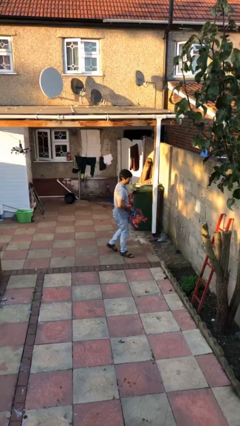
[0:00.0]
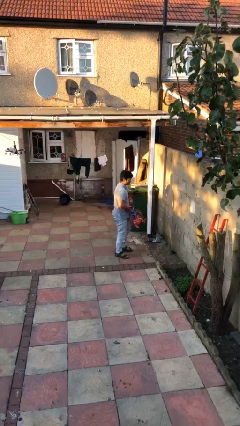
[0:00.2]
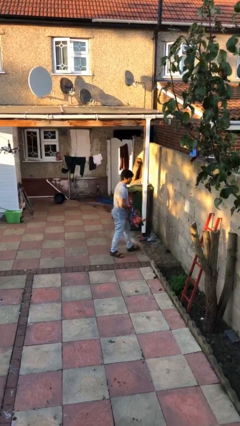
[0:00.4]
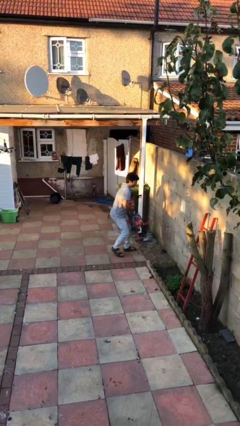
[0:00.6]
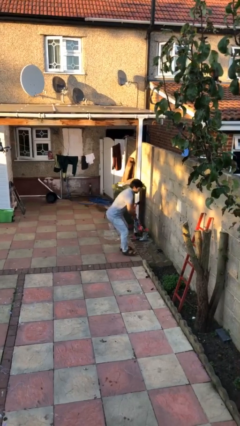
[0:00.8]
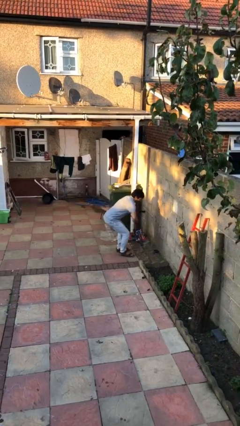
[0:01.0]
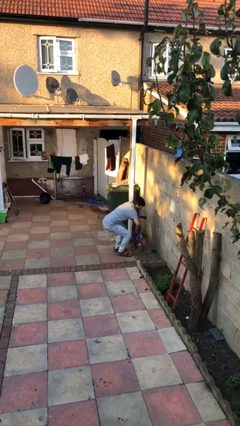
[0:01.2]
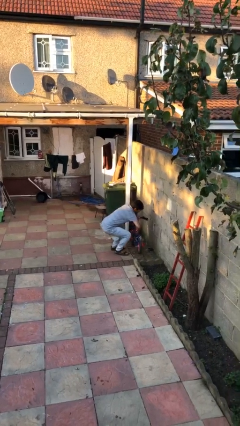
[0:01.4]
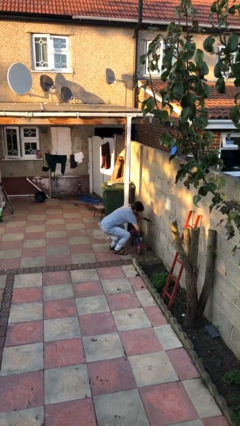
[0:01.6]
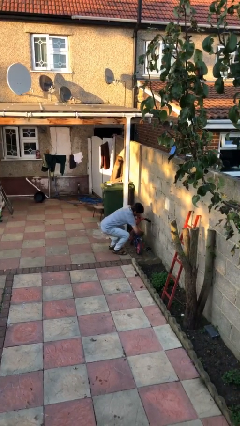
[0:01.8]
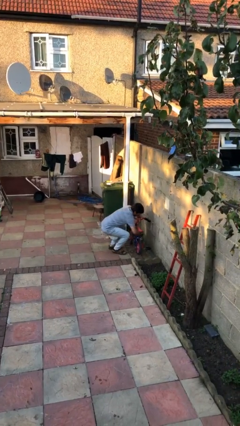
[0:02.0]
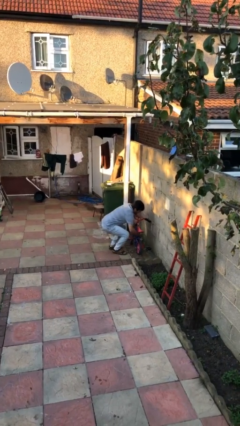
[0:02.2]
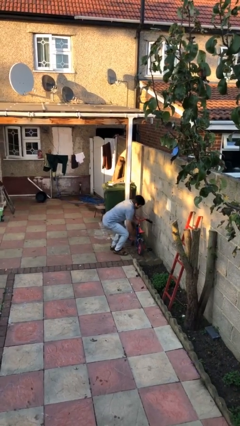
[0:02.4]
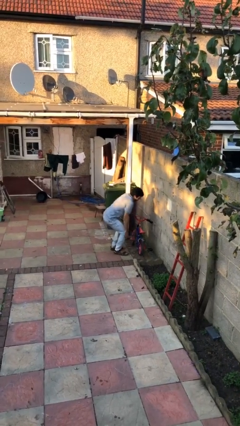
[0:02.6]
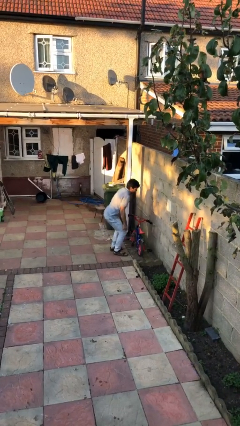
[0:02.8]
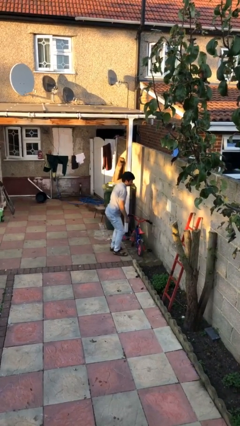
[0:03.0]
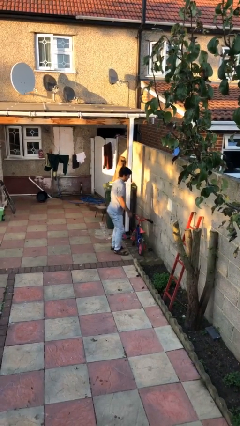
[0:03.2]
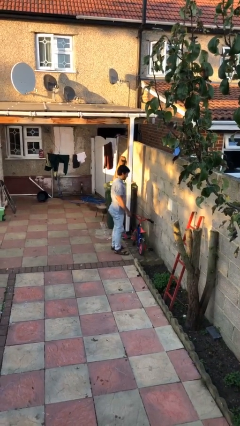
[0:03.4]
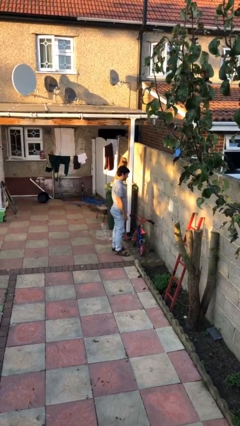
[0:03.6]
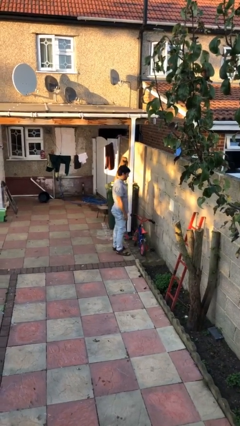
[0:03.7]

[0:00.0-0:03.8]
person puts down object on floor

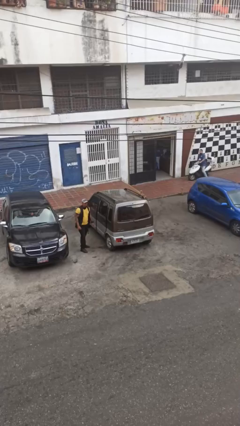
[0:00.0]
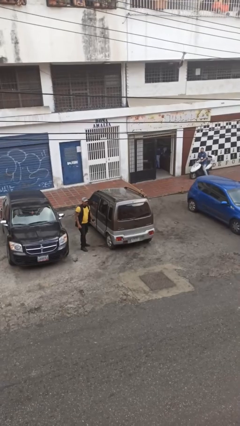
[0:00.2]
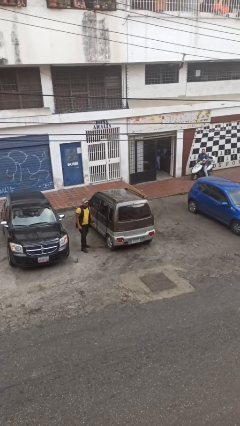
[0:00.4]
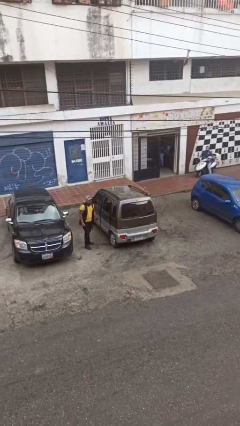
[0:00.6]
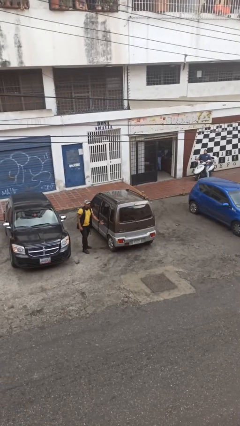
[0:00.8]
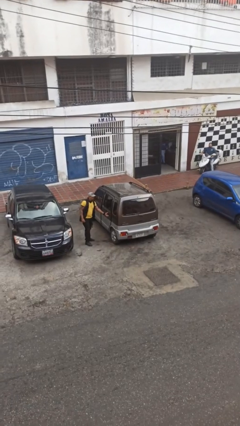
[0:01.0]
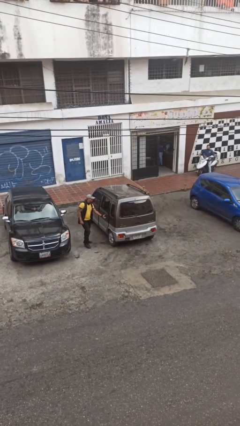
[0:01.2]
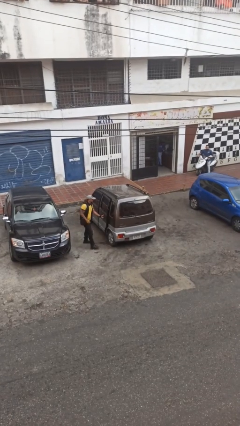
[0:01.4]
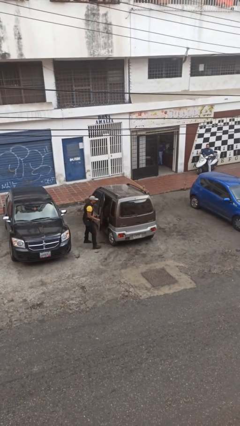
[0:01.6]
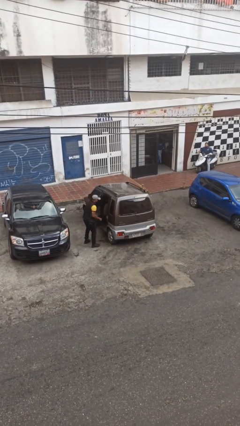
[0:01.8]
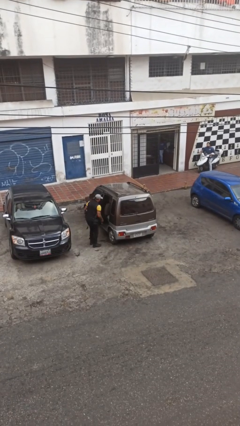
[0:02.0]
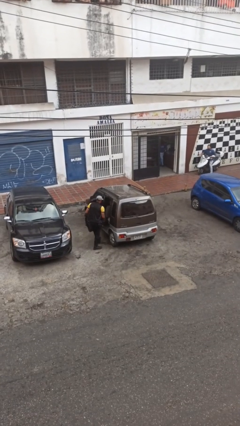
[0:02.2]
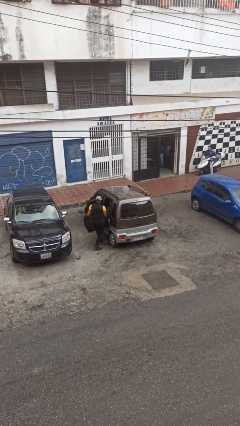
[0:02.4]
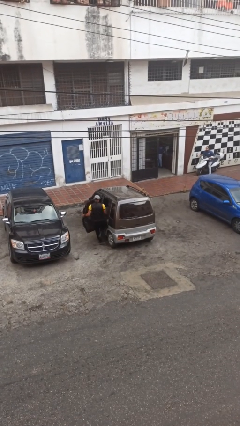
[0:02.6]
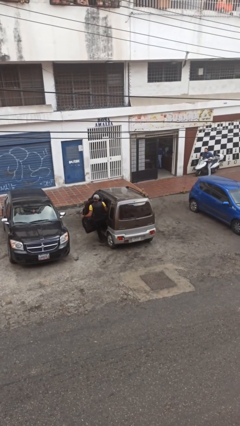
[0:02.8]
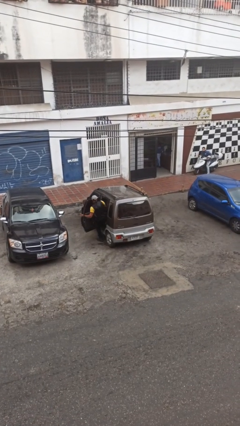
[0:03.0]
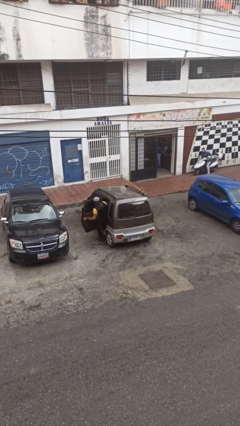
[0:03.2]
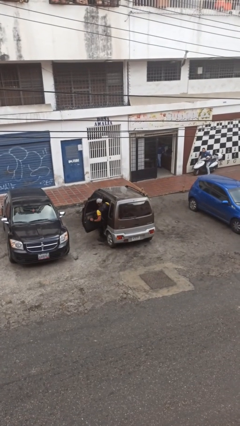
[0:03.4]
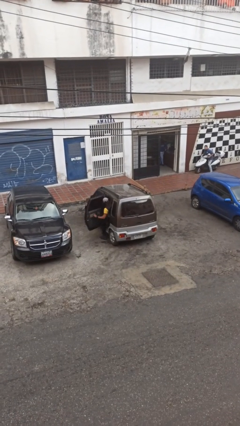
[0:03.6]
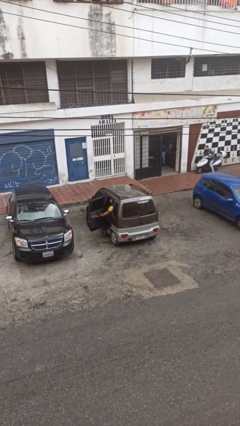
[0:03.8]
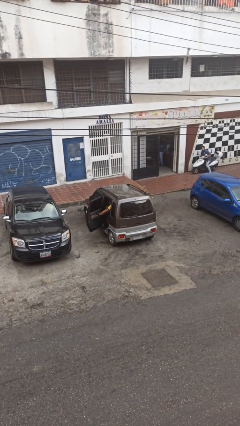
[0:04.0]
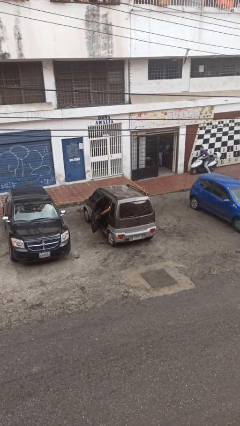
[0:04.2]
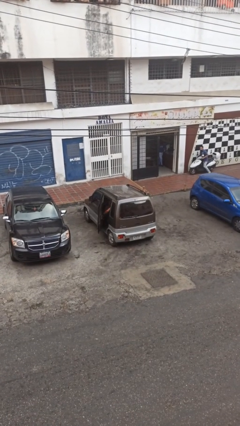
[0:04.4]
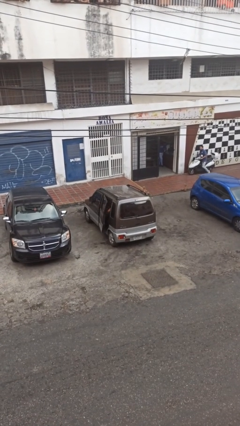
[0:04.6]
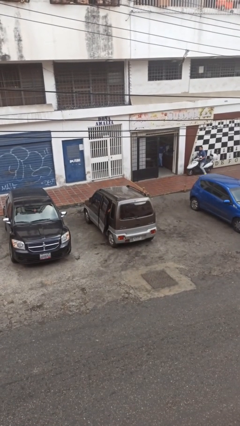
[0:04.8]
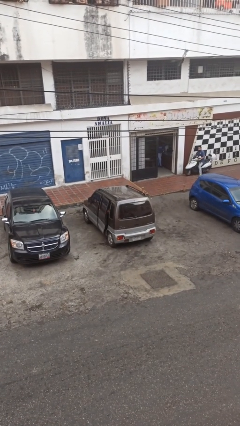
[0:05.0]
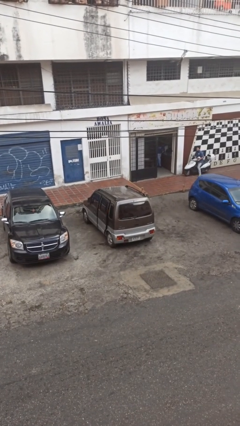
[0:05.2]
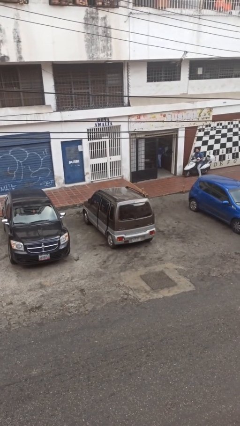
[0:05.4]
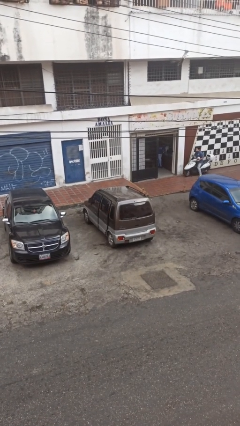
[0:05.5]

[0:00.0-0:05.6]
car picks up person

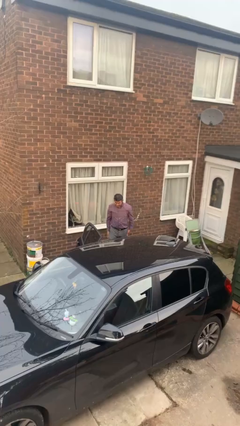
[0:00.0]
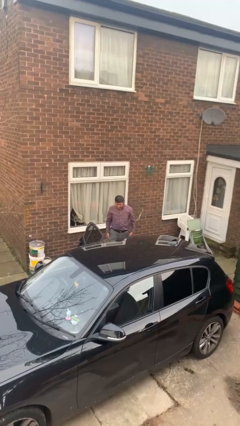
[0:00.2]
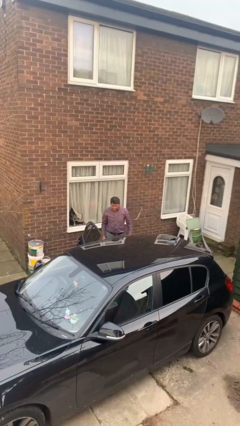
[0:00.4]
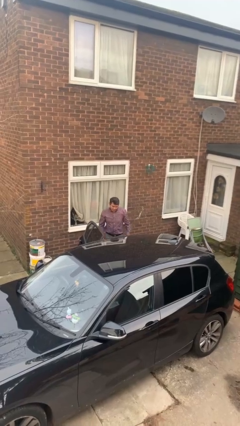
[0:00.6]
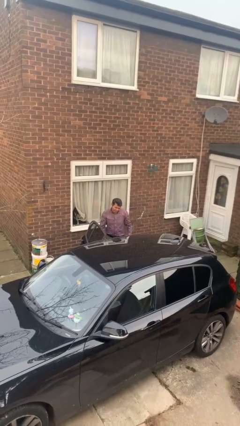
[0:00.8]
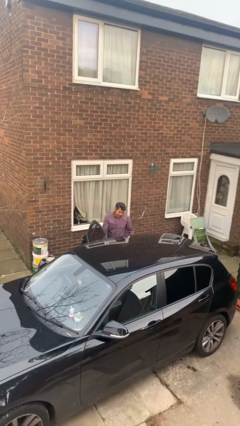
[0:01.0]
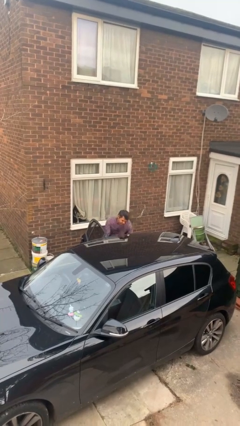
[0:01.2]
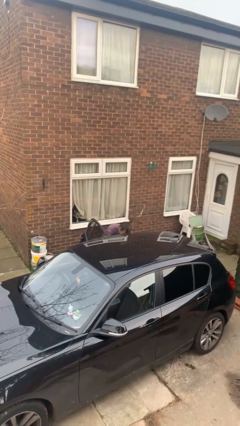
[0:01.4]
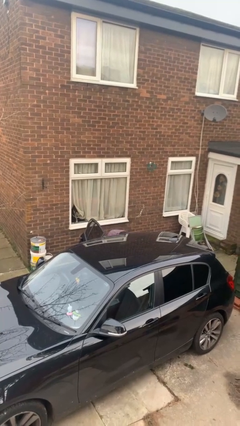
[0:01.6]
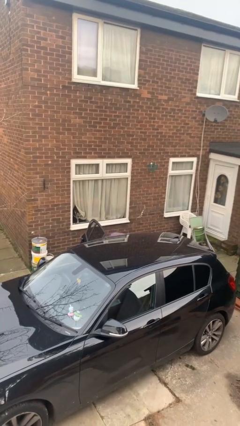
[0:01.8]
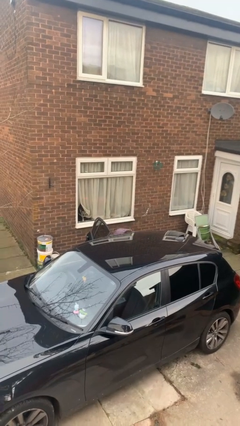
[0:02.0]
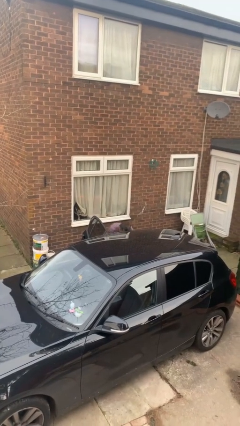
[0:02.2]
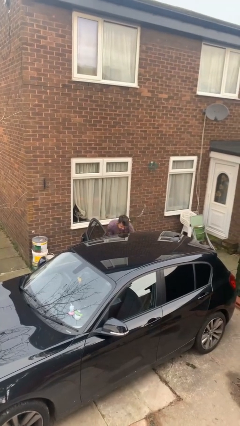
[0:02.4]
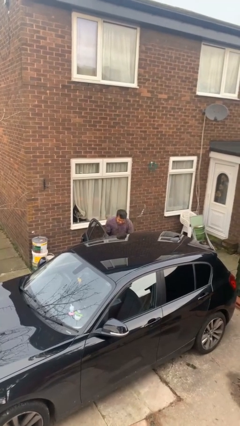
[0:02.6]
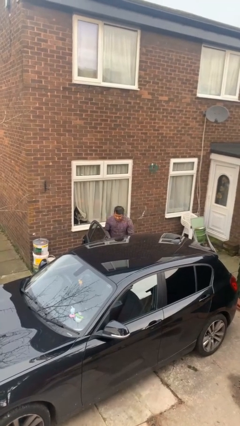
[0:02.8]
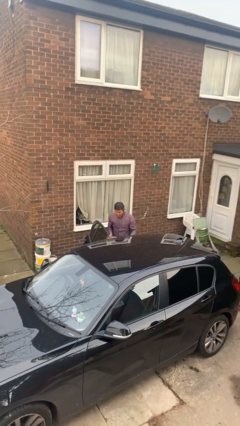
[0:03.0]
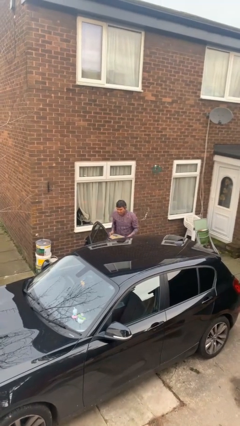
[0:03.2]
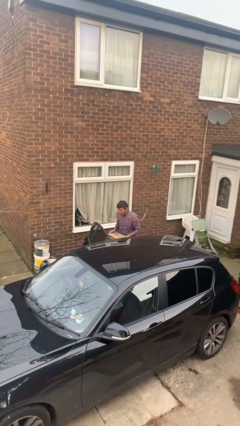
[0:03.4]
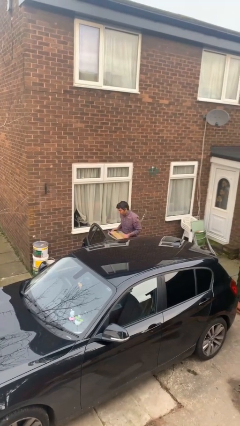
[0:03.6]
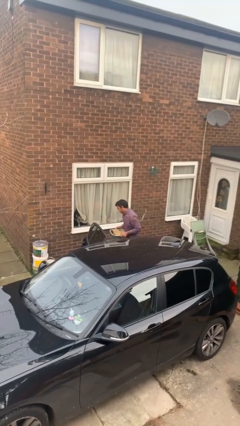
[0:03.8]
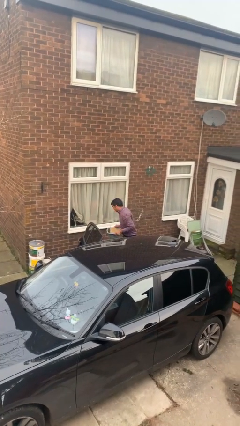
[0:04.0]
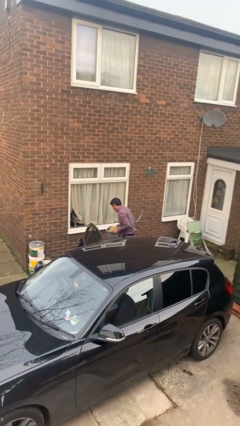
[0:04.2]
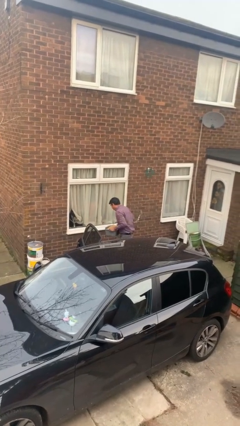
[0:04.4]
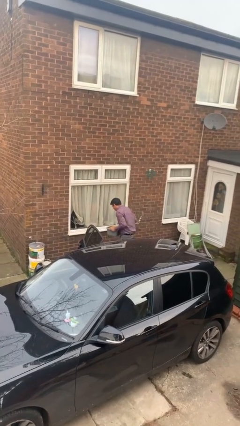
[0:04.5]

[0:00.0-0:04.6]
person unloads car

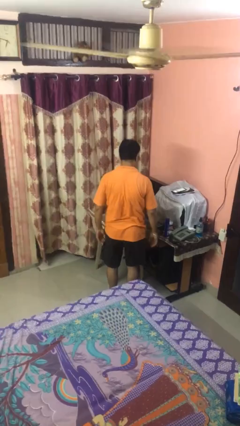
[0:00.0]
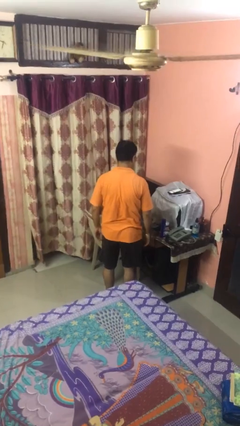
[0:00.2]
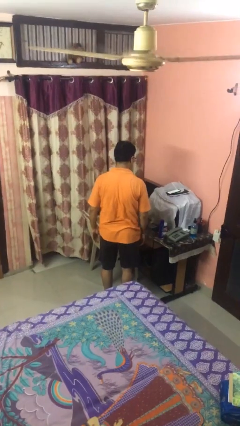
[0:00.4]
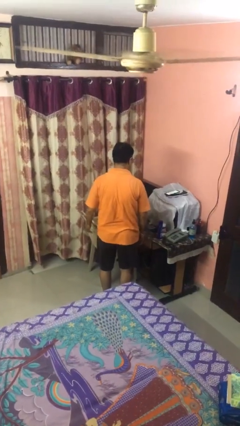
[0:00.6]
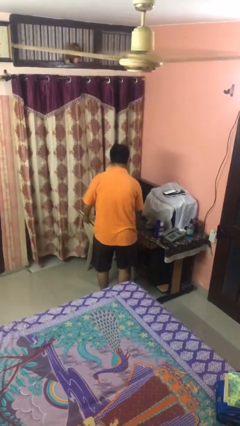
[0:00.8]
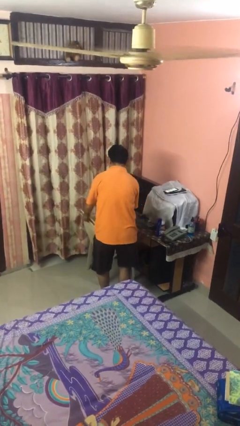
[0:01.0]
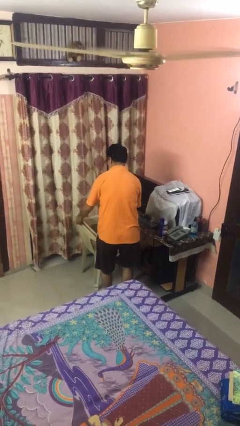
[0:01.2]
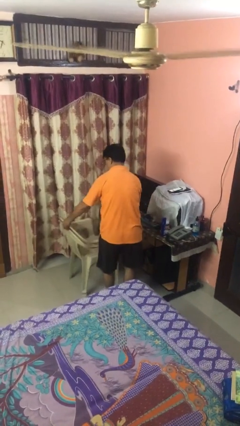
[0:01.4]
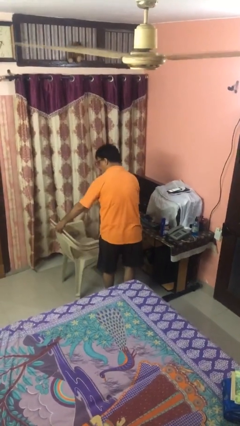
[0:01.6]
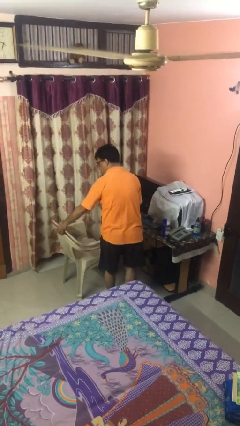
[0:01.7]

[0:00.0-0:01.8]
person pulls out chair

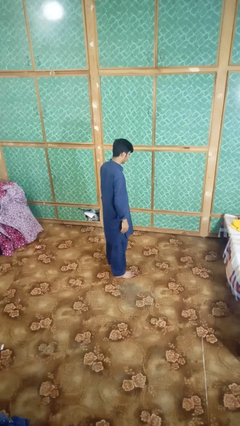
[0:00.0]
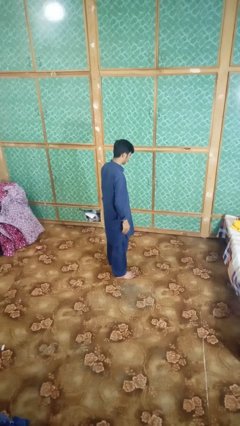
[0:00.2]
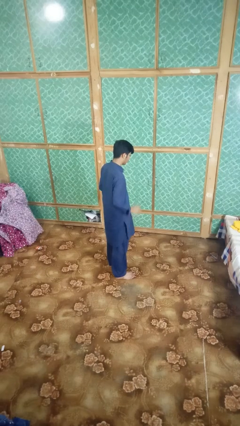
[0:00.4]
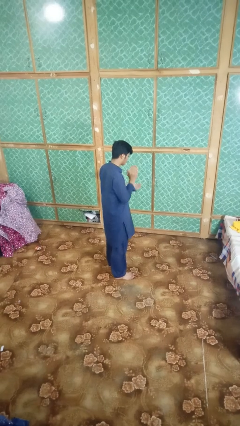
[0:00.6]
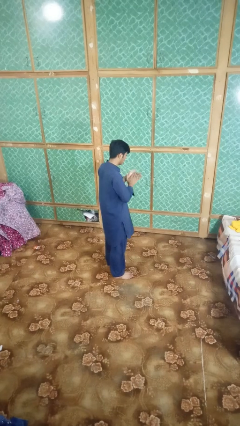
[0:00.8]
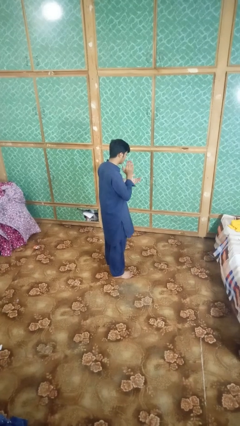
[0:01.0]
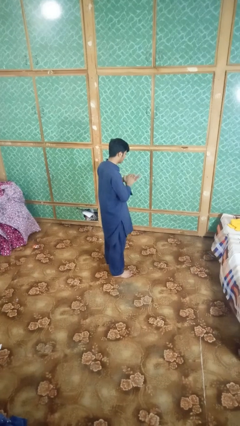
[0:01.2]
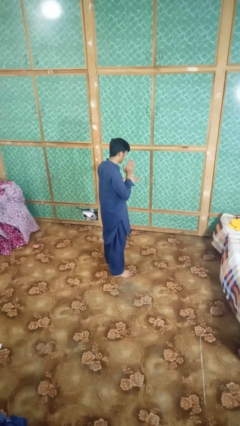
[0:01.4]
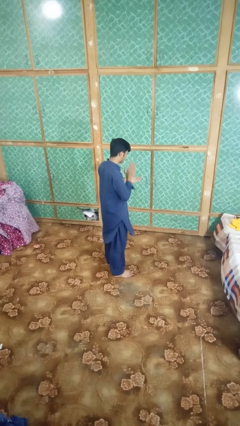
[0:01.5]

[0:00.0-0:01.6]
person claps hands

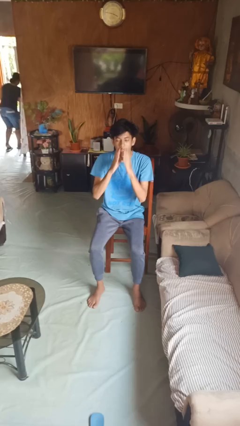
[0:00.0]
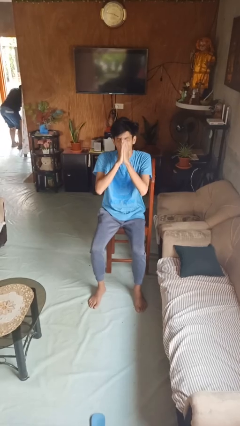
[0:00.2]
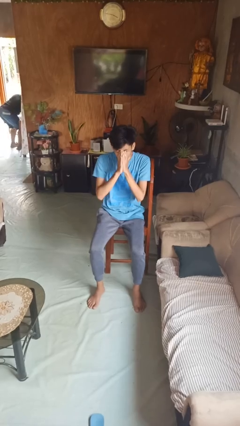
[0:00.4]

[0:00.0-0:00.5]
person sneezes into hand
